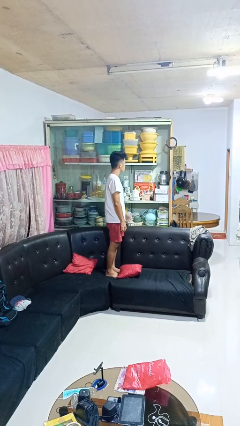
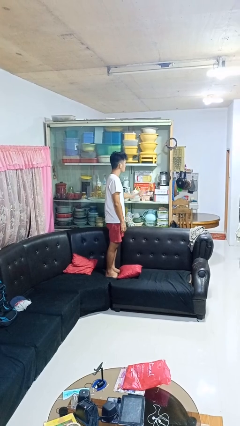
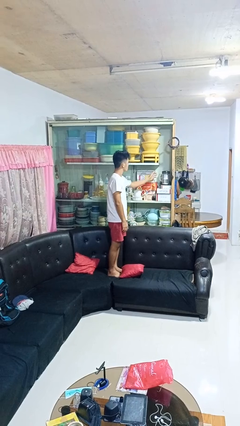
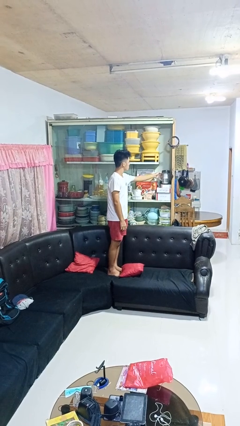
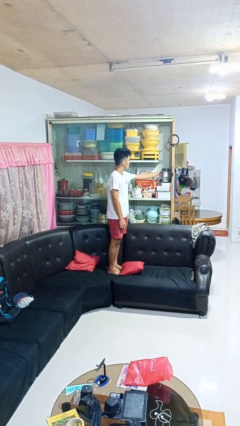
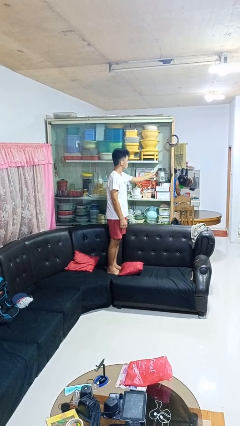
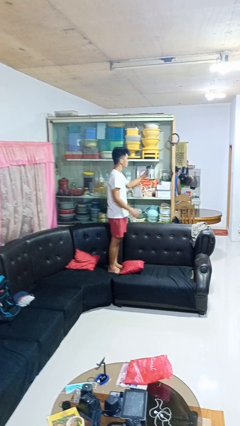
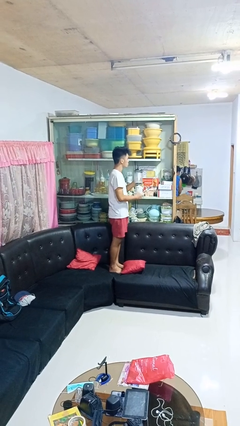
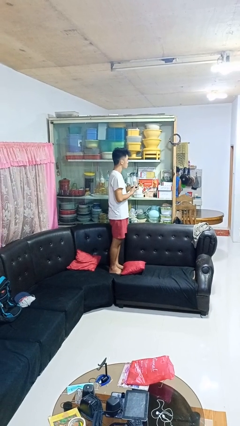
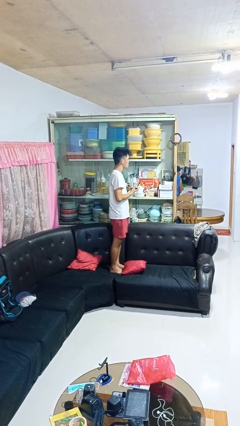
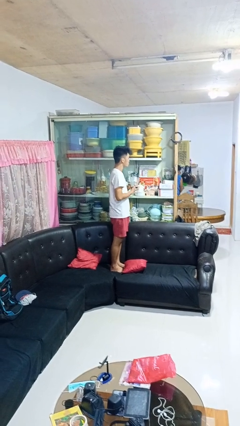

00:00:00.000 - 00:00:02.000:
person picks up object from cabinet

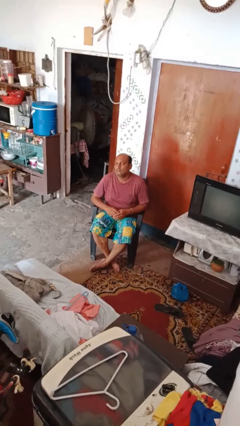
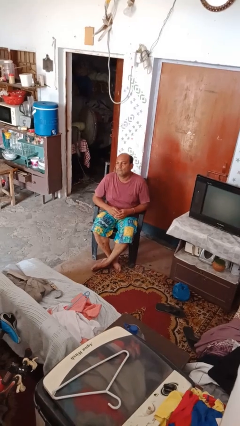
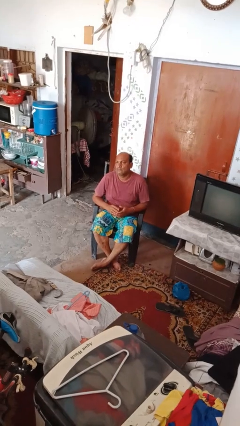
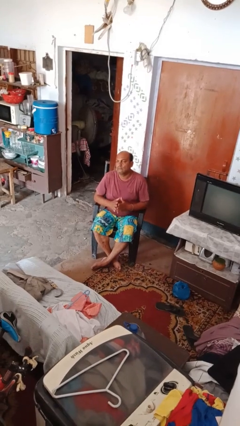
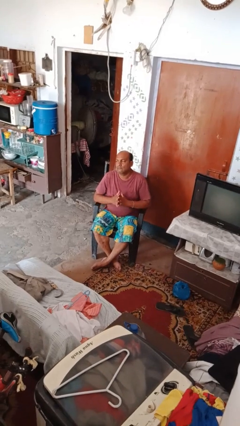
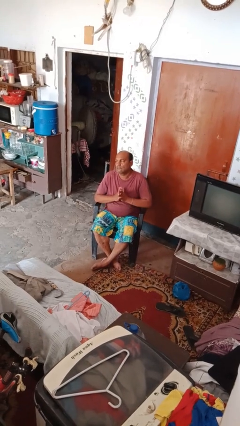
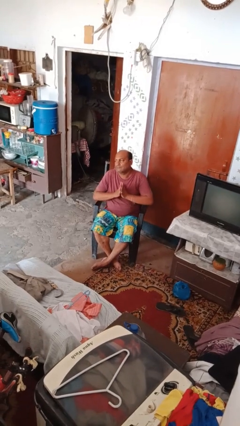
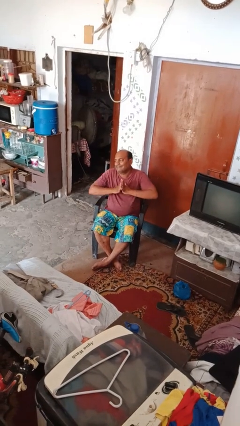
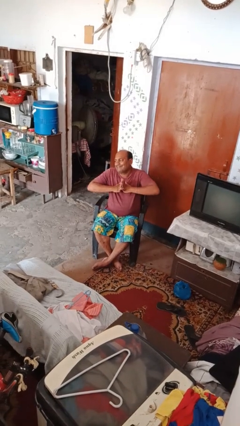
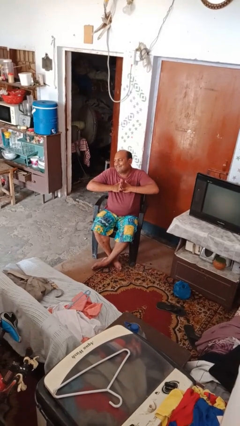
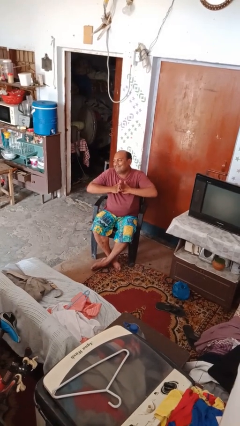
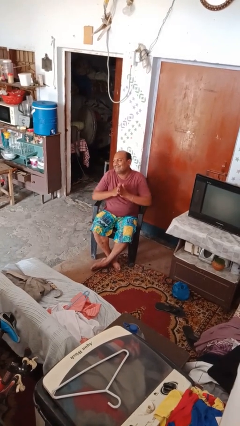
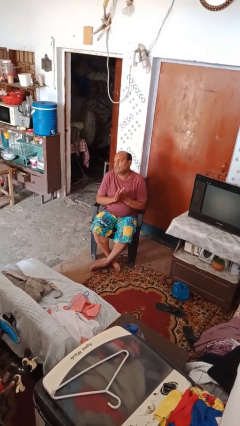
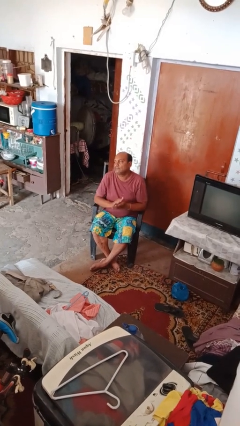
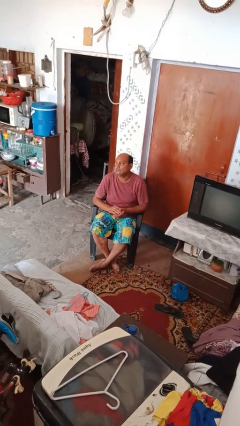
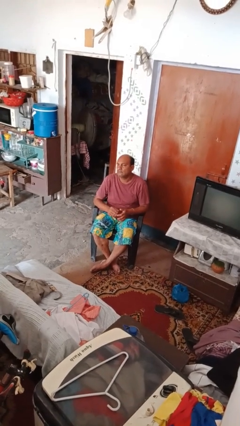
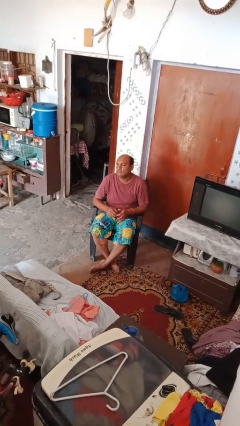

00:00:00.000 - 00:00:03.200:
person cracks knuckles

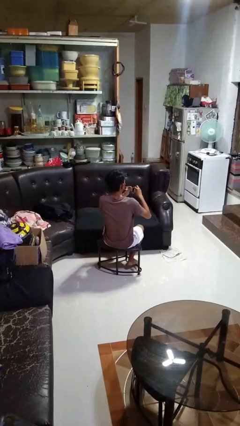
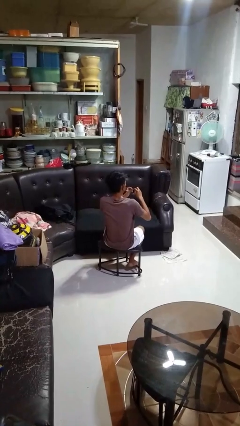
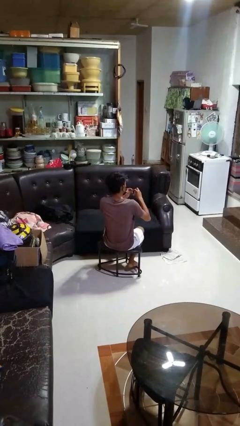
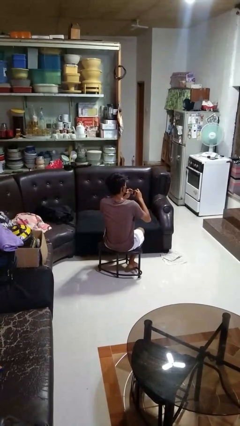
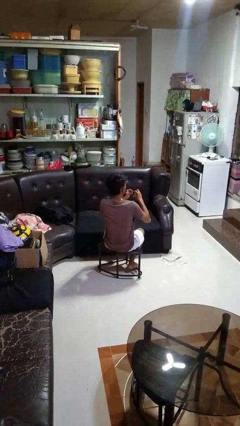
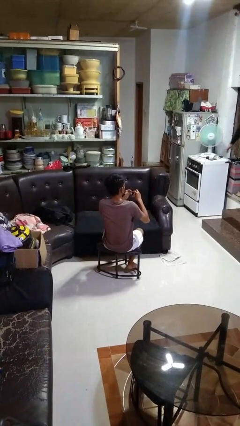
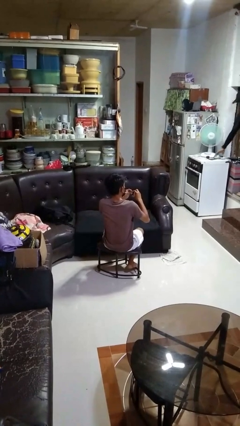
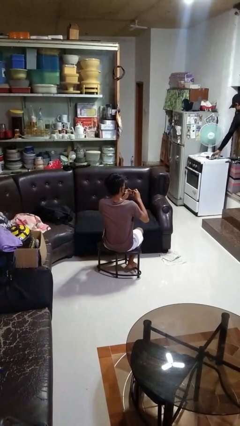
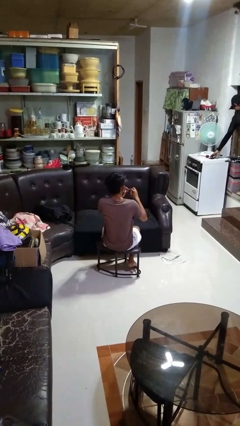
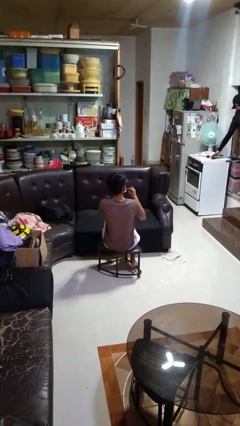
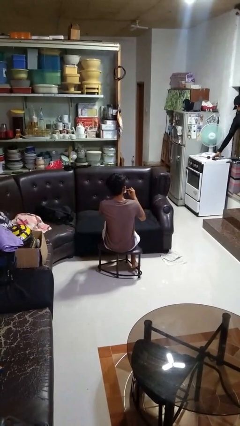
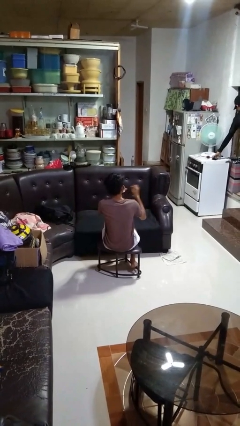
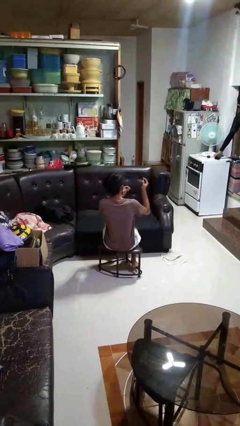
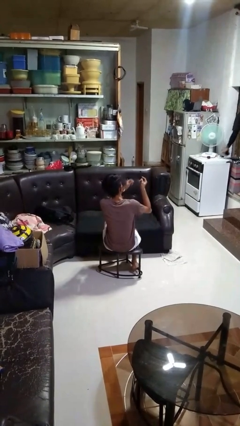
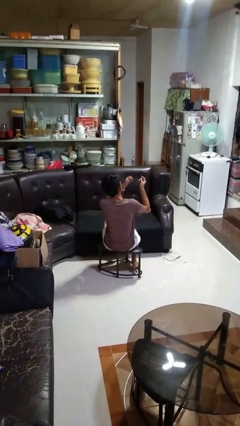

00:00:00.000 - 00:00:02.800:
person files fingernails

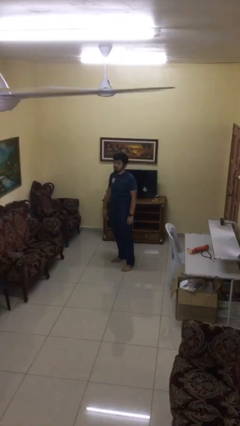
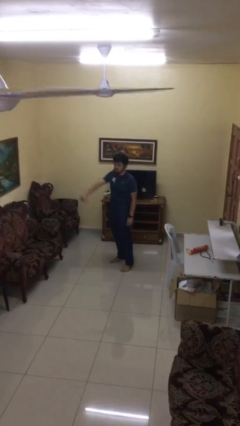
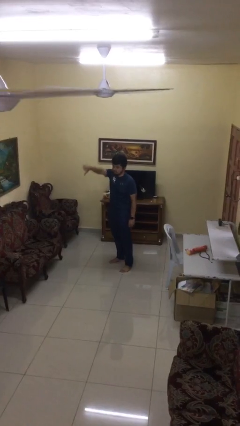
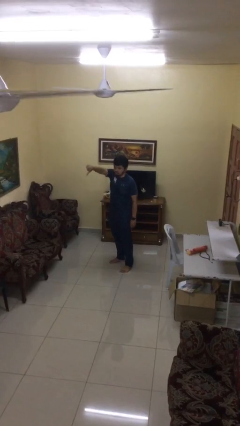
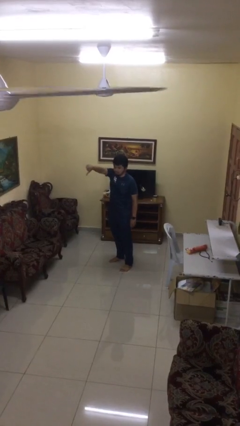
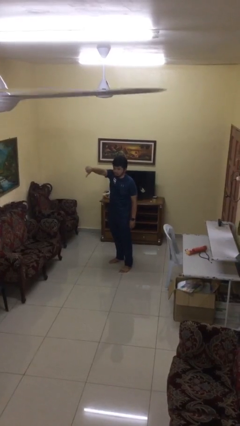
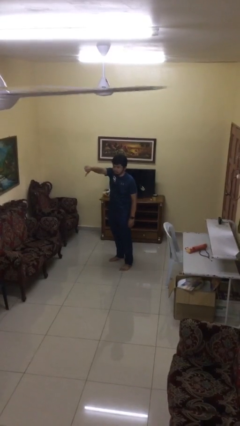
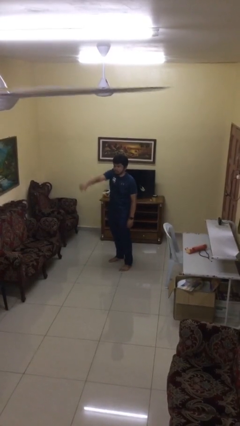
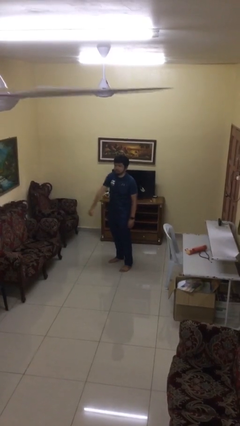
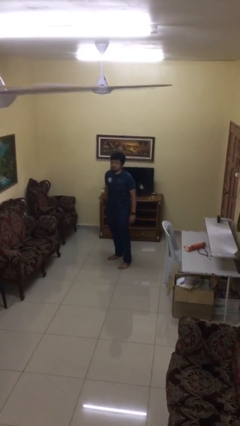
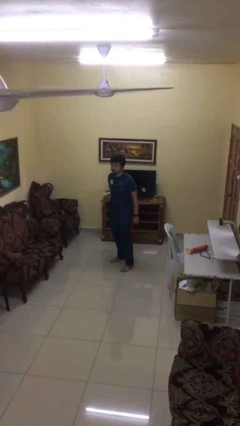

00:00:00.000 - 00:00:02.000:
person gestures thumbs down

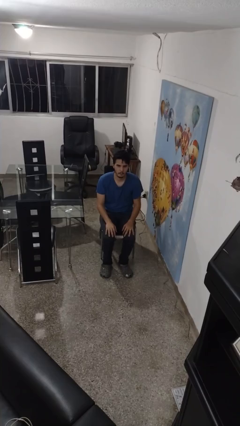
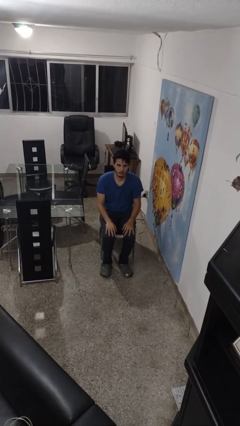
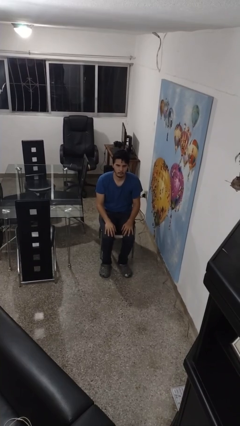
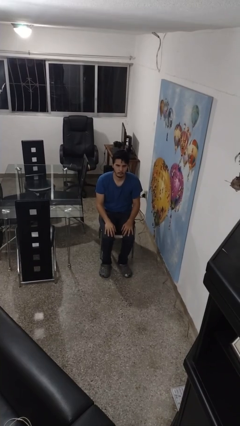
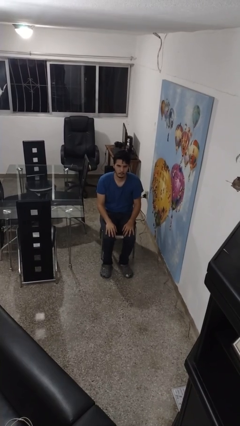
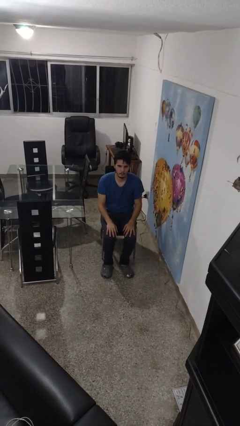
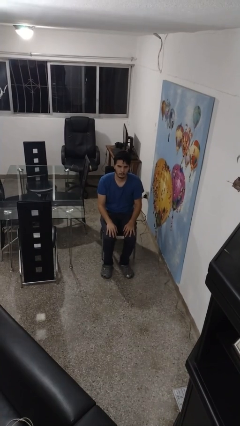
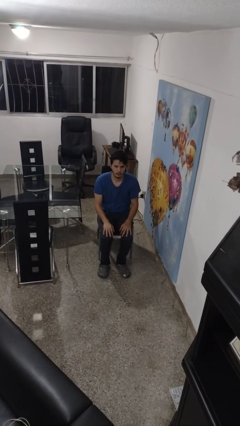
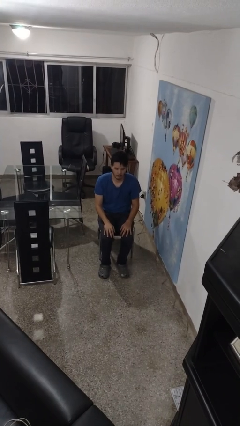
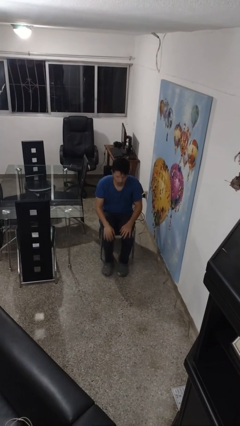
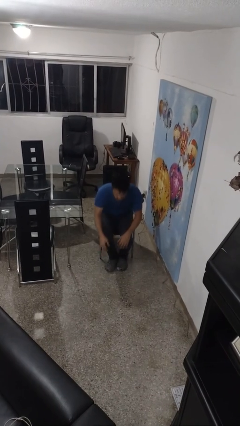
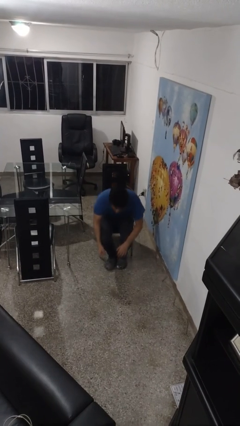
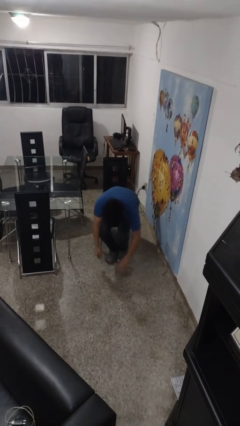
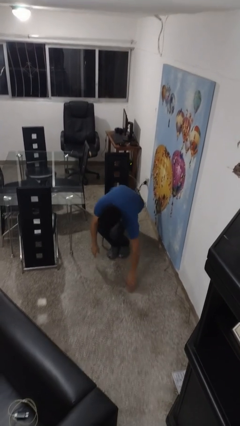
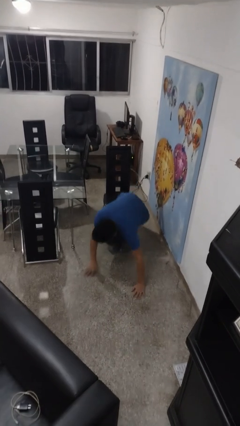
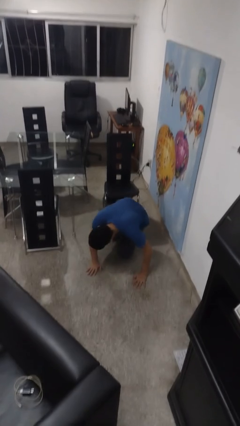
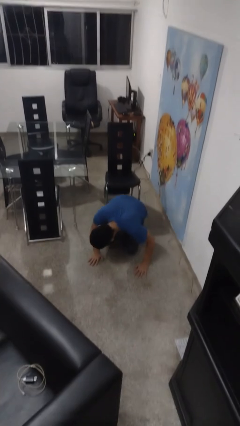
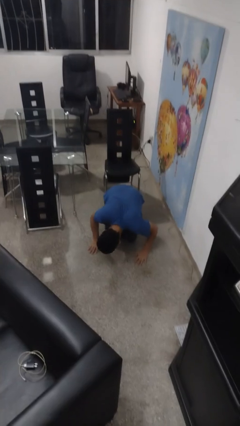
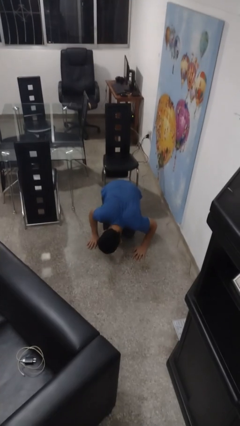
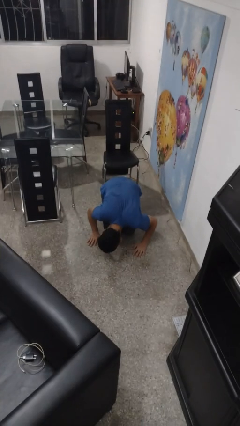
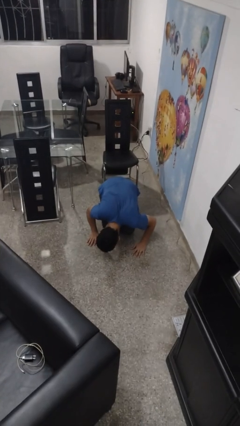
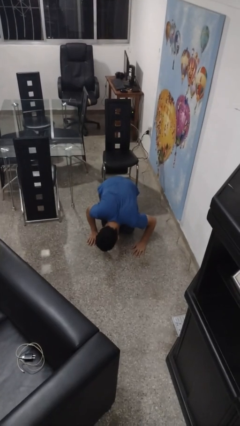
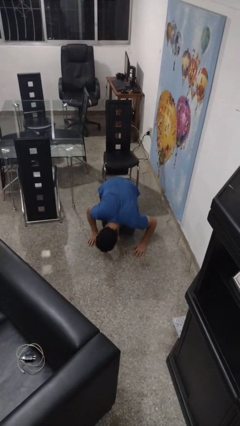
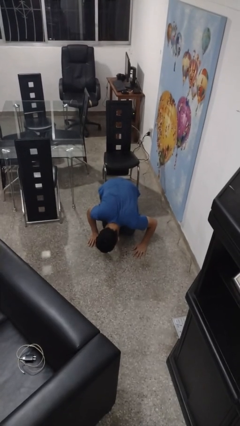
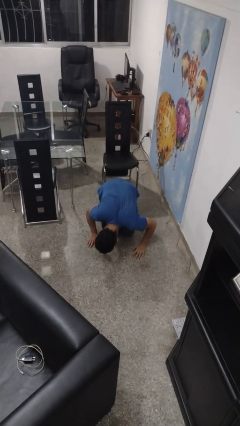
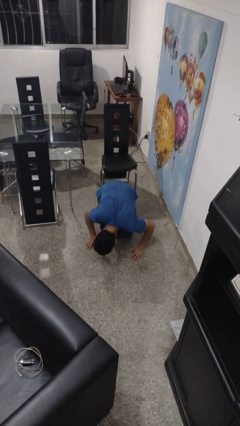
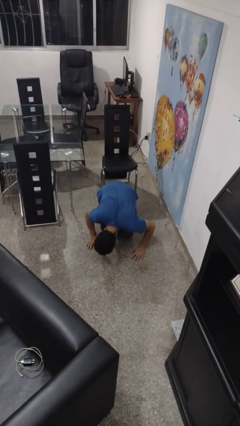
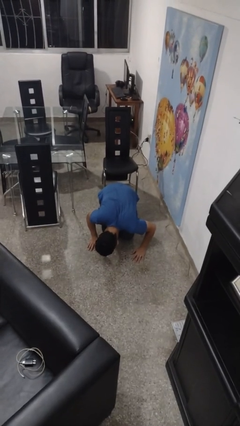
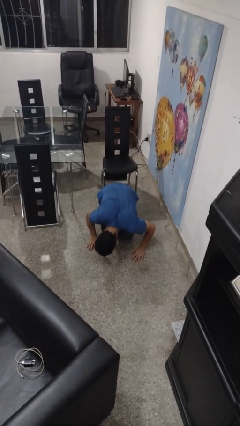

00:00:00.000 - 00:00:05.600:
person falls from chair

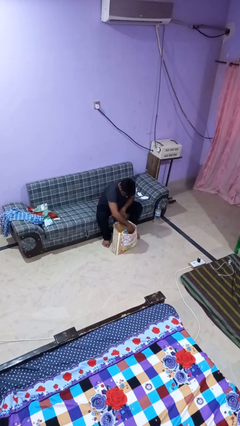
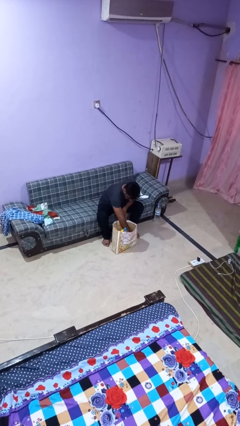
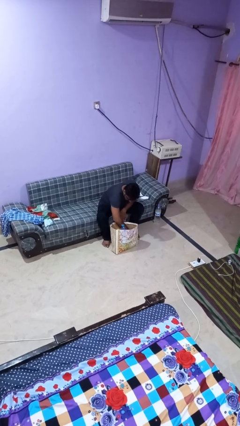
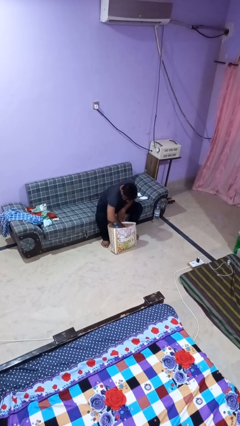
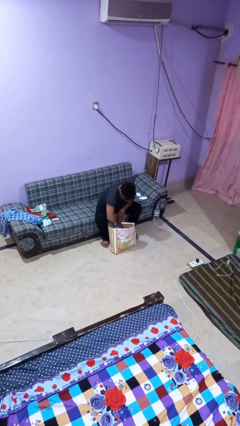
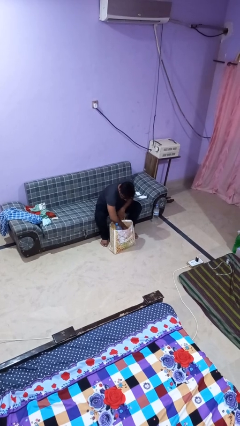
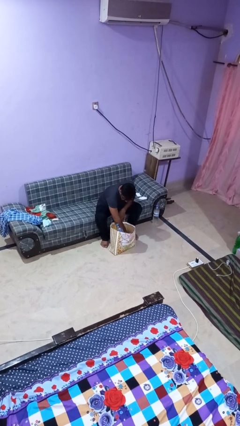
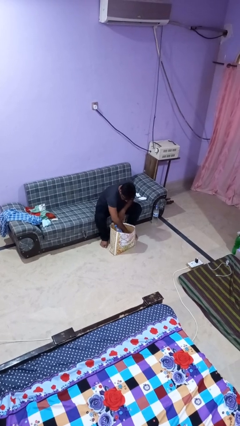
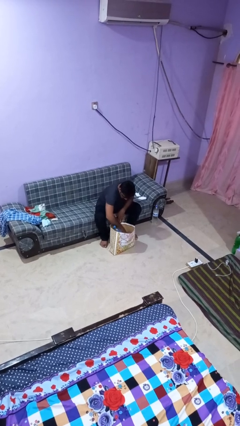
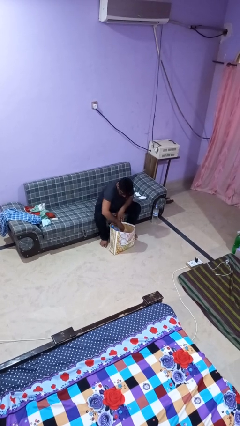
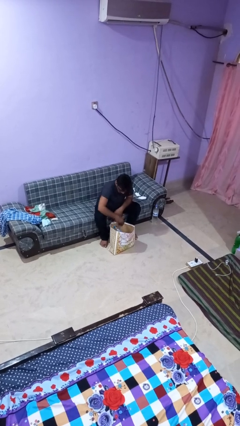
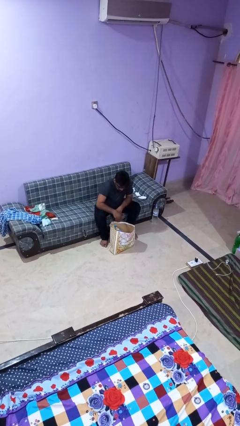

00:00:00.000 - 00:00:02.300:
person searches in bag
